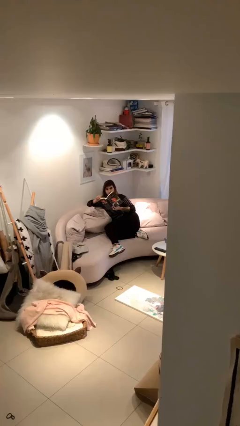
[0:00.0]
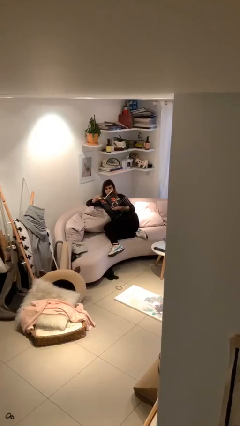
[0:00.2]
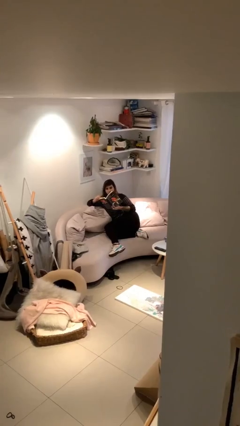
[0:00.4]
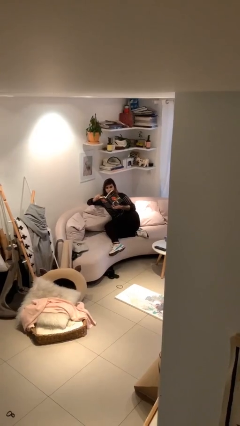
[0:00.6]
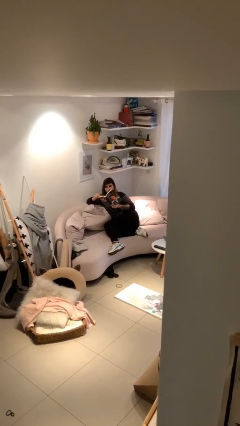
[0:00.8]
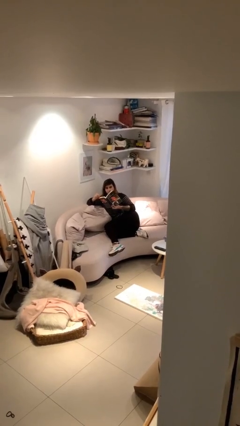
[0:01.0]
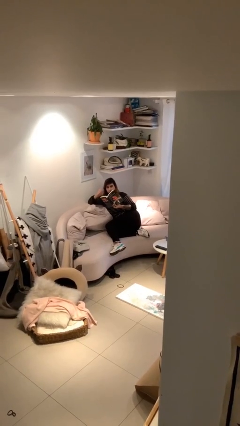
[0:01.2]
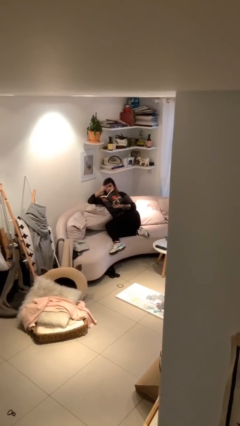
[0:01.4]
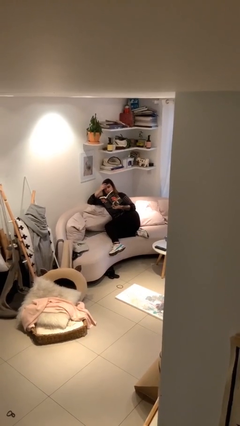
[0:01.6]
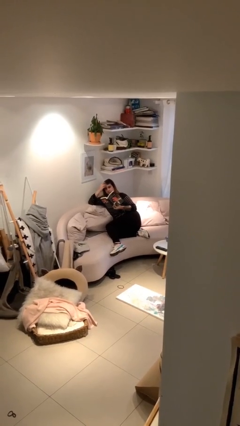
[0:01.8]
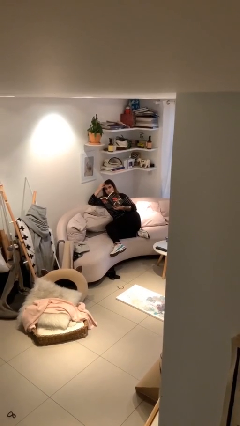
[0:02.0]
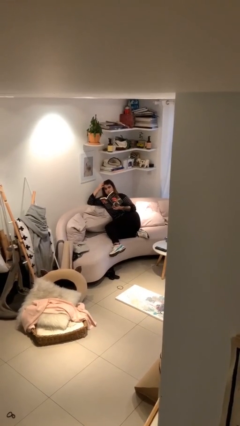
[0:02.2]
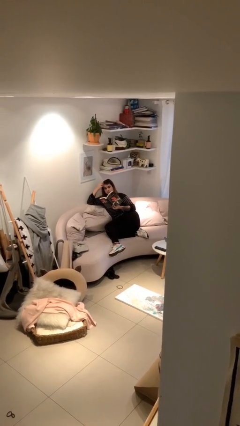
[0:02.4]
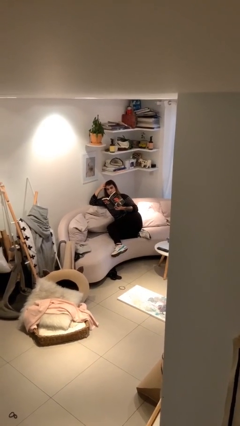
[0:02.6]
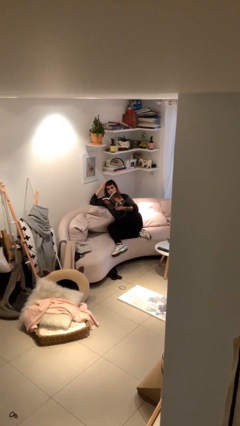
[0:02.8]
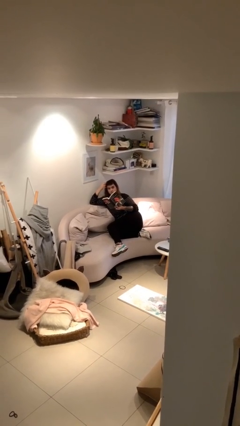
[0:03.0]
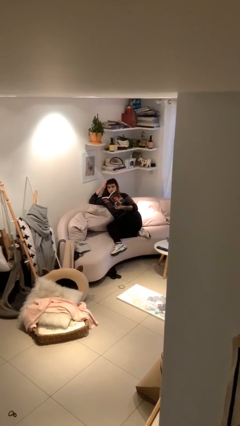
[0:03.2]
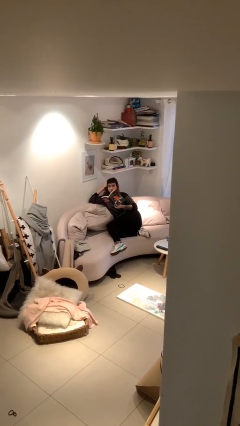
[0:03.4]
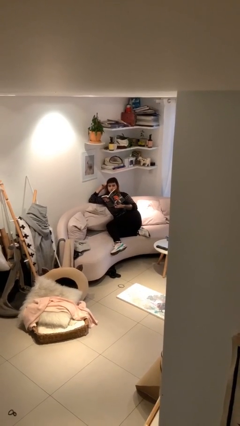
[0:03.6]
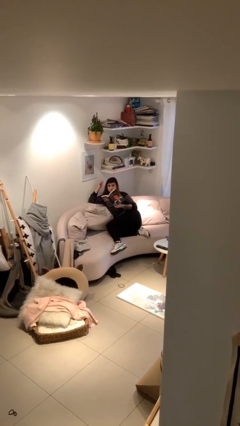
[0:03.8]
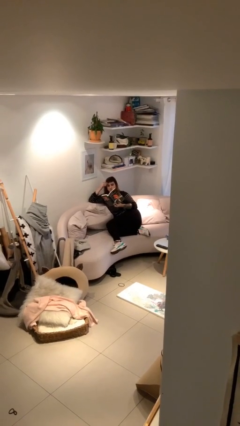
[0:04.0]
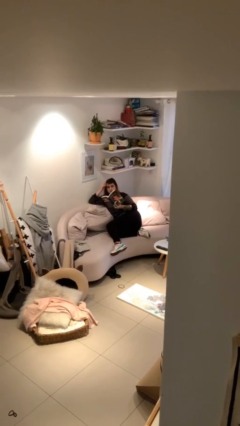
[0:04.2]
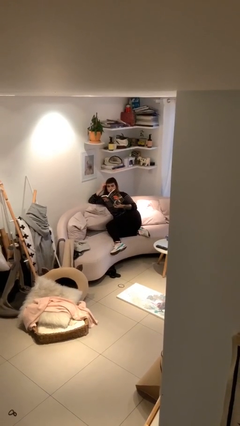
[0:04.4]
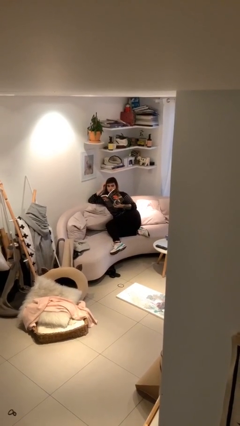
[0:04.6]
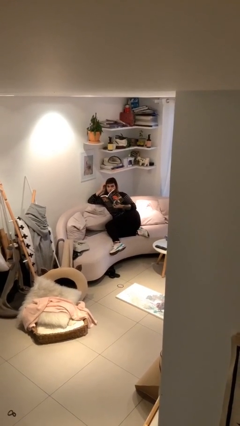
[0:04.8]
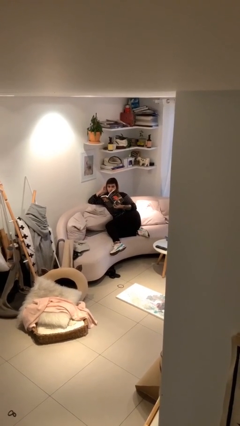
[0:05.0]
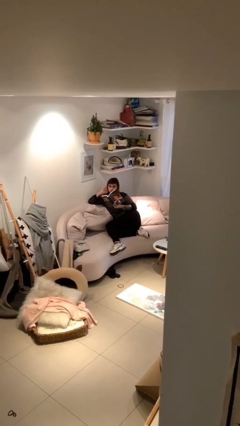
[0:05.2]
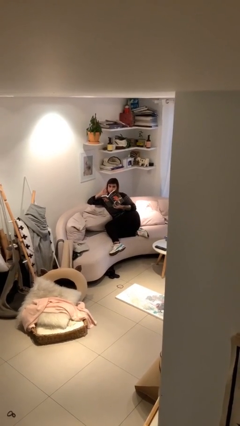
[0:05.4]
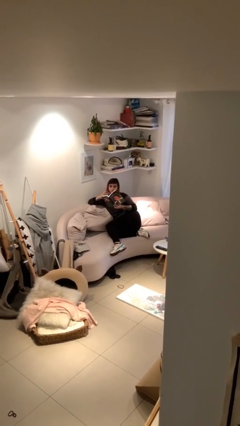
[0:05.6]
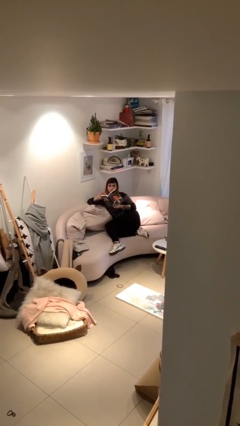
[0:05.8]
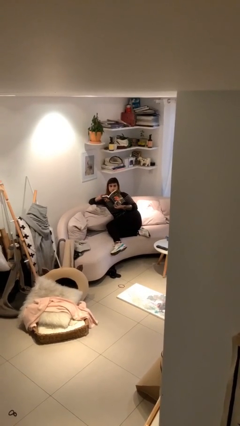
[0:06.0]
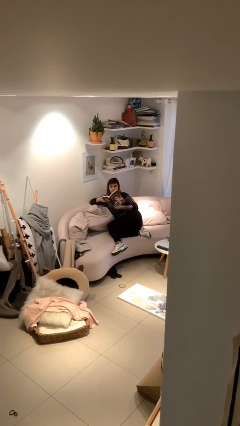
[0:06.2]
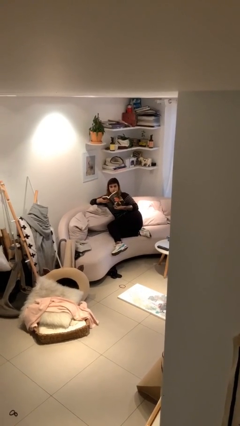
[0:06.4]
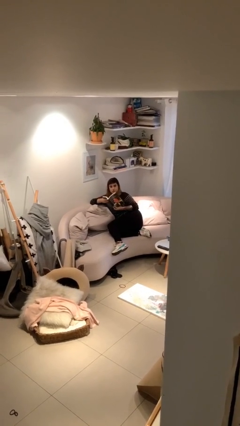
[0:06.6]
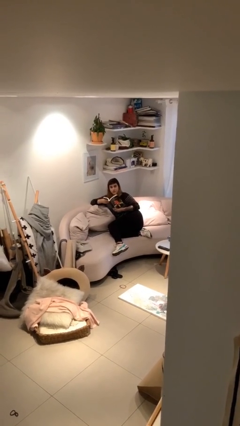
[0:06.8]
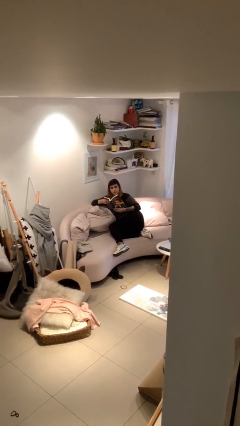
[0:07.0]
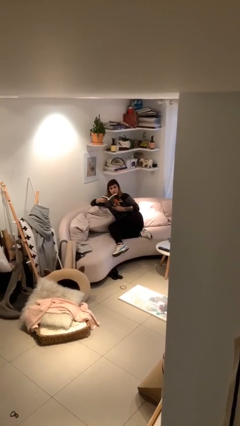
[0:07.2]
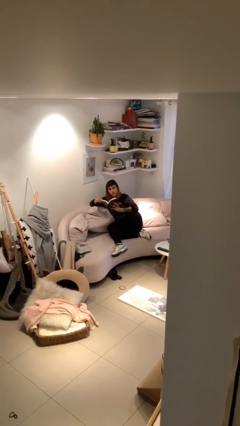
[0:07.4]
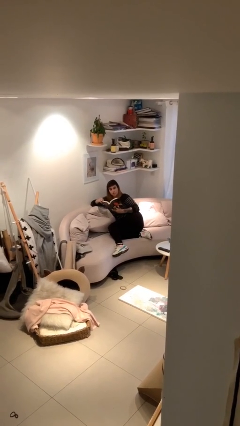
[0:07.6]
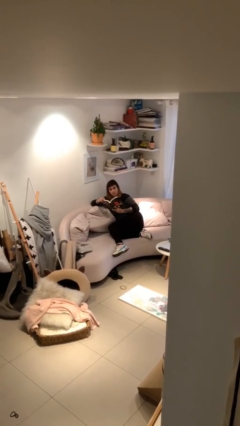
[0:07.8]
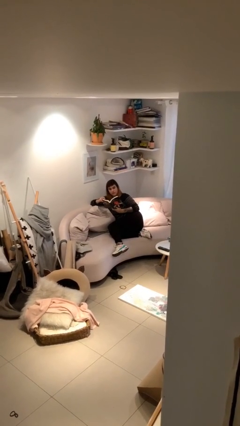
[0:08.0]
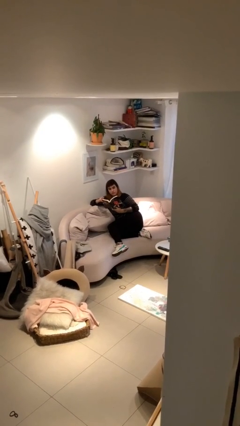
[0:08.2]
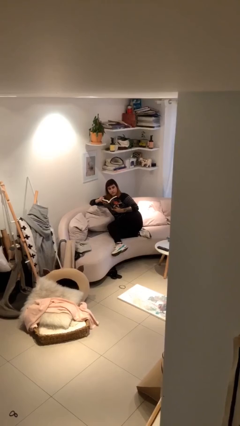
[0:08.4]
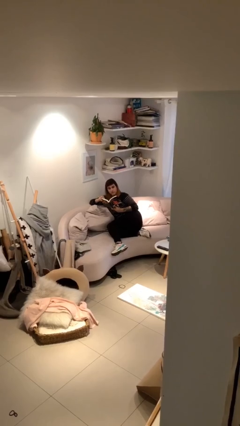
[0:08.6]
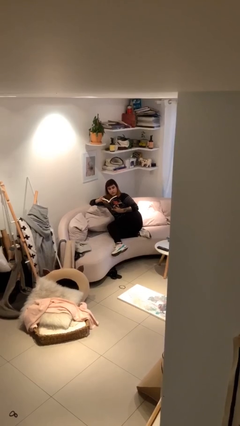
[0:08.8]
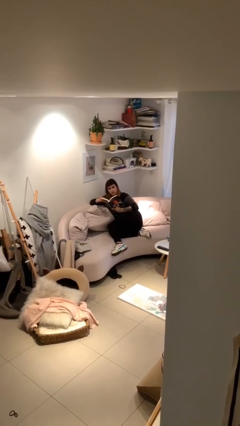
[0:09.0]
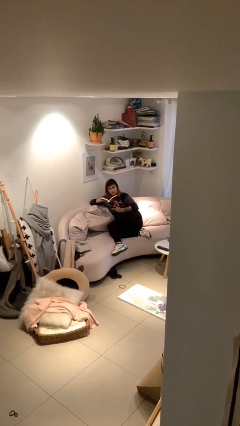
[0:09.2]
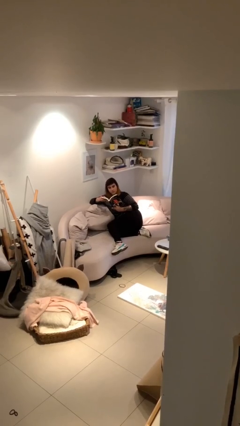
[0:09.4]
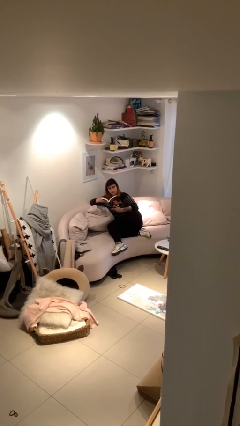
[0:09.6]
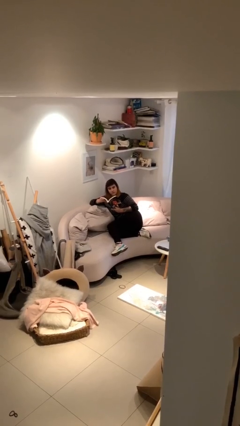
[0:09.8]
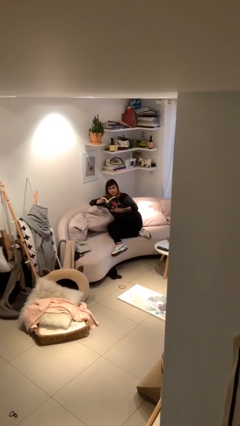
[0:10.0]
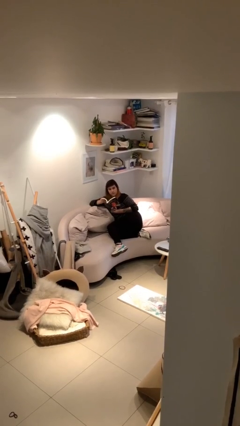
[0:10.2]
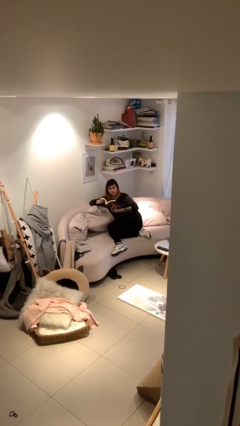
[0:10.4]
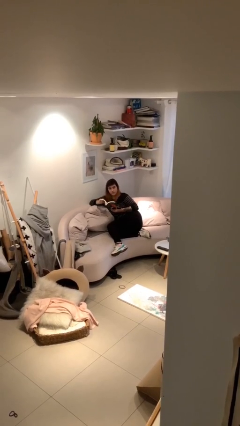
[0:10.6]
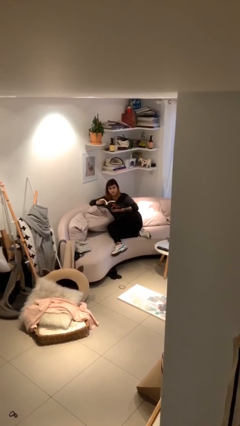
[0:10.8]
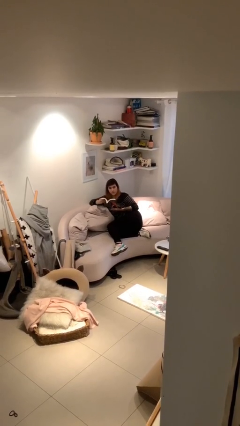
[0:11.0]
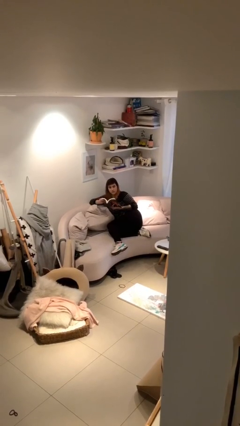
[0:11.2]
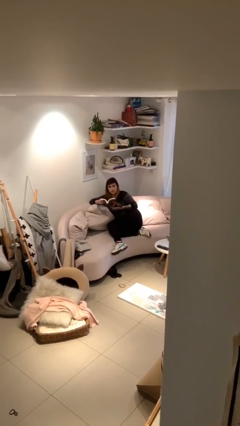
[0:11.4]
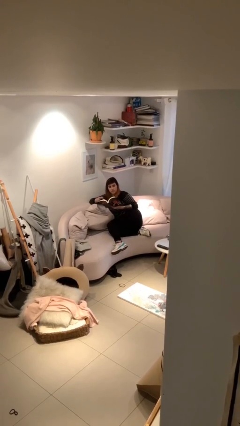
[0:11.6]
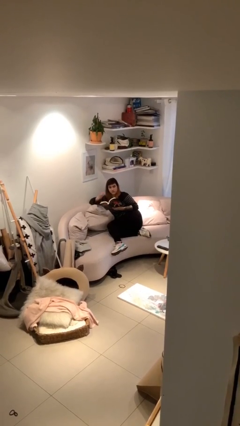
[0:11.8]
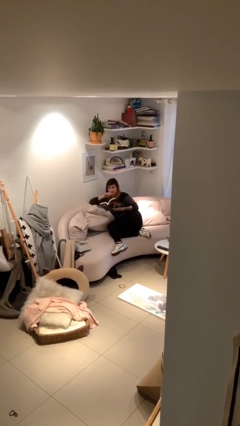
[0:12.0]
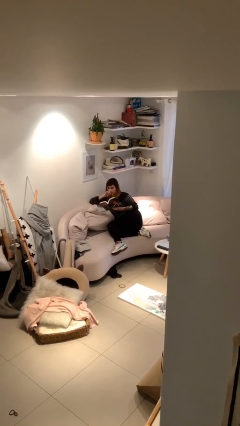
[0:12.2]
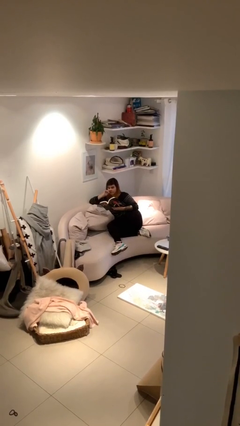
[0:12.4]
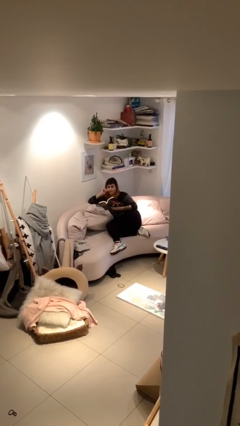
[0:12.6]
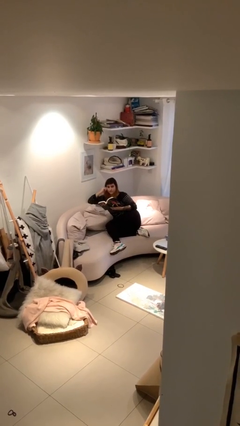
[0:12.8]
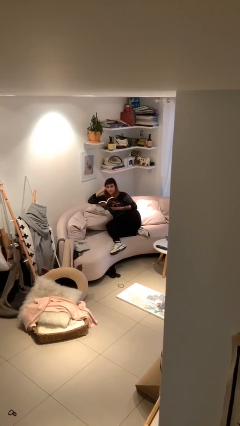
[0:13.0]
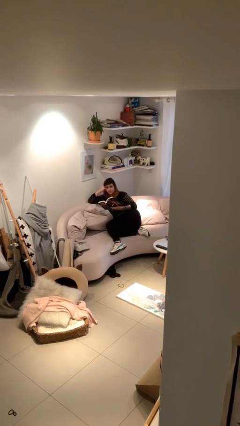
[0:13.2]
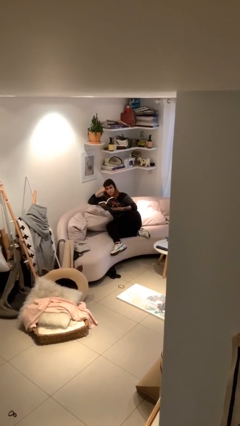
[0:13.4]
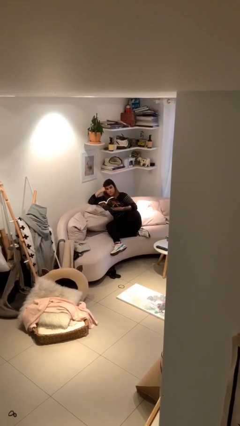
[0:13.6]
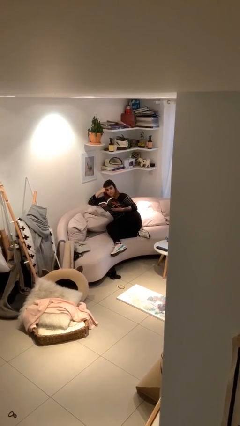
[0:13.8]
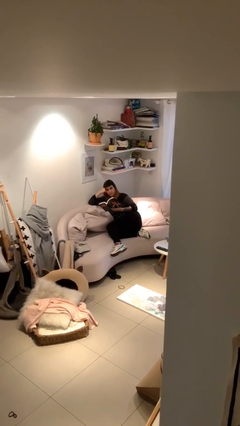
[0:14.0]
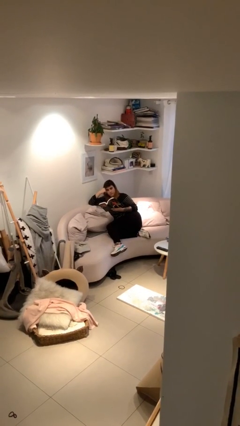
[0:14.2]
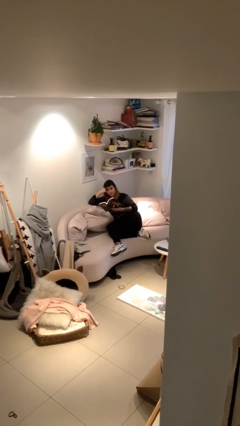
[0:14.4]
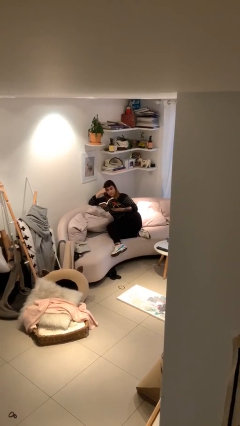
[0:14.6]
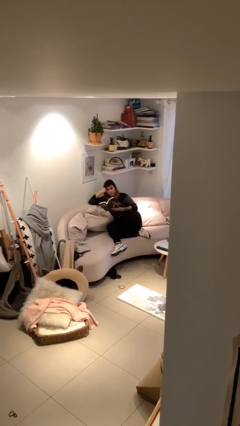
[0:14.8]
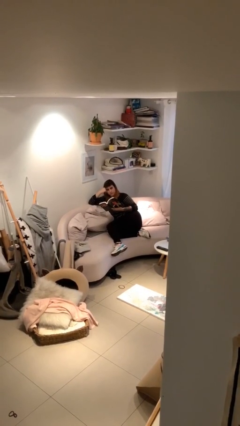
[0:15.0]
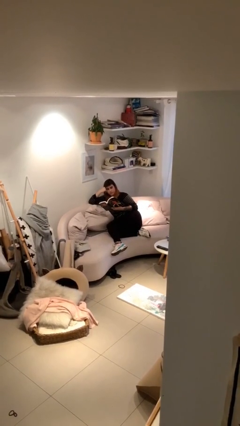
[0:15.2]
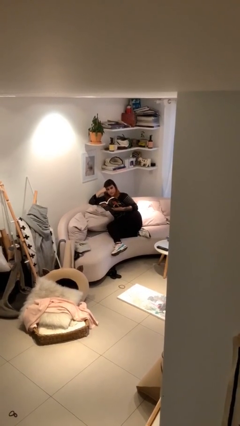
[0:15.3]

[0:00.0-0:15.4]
person reads document

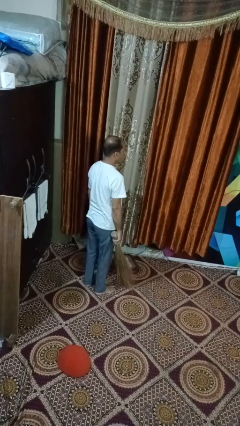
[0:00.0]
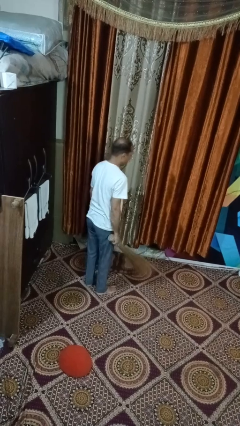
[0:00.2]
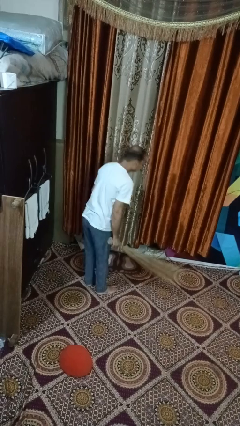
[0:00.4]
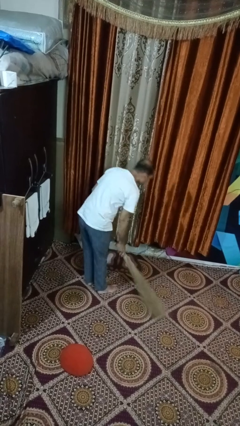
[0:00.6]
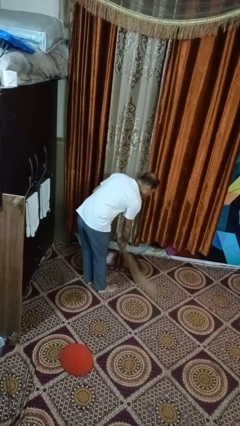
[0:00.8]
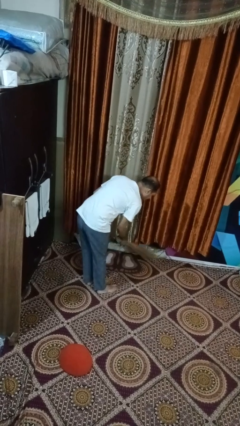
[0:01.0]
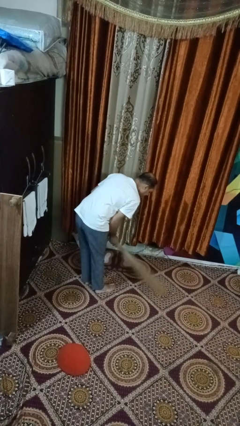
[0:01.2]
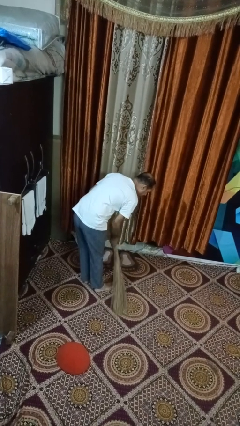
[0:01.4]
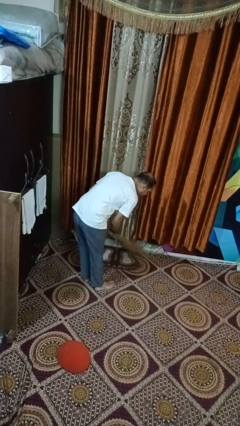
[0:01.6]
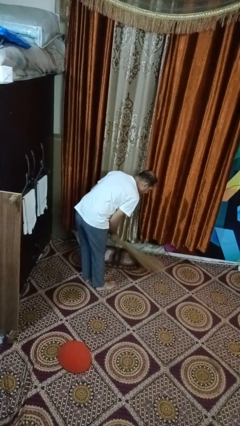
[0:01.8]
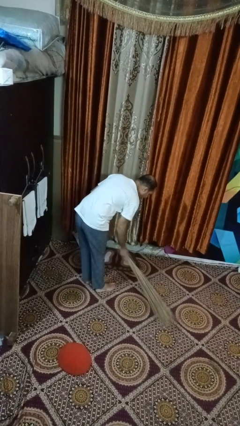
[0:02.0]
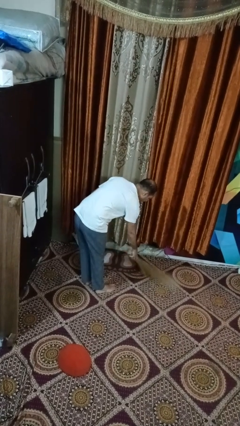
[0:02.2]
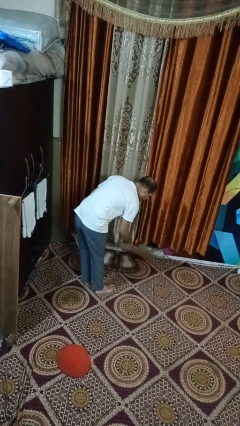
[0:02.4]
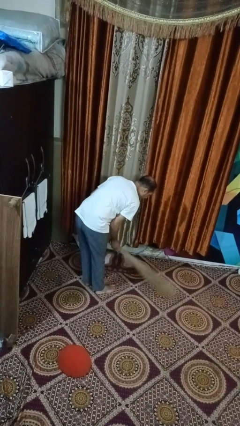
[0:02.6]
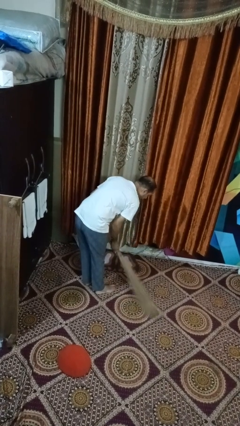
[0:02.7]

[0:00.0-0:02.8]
person sweeps floor
